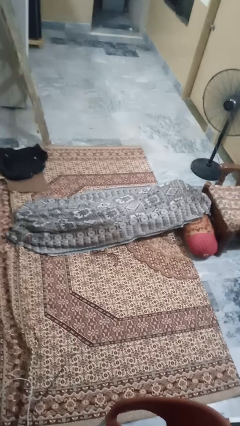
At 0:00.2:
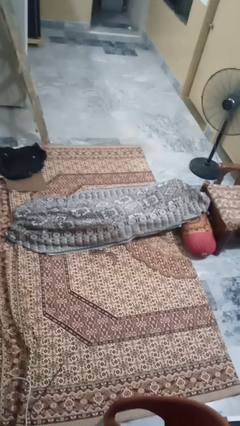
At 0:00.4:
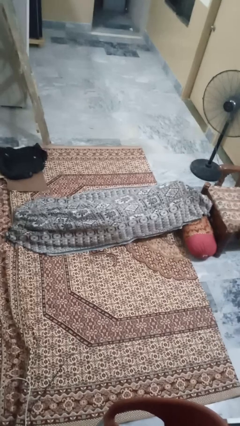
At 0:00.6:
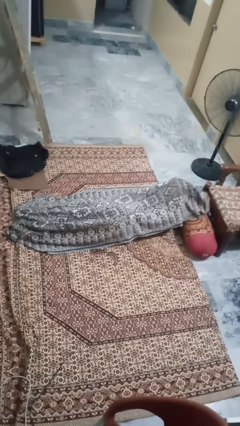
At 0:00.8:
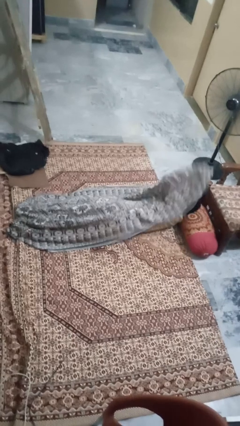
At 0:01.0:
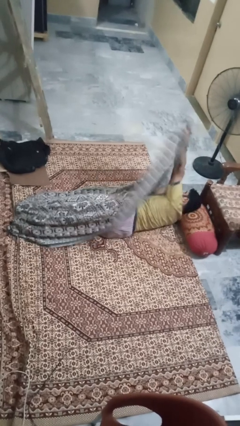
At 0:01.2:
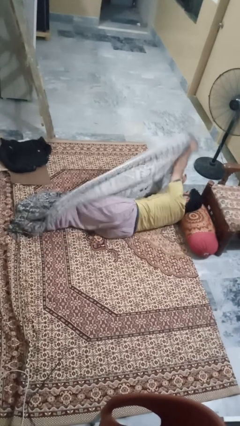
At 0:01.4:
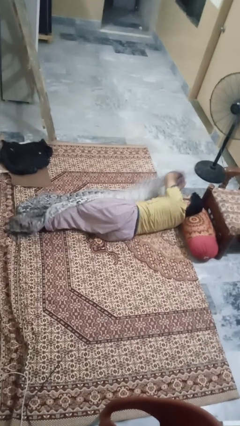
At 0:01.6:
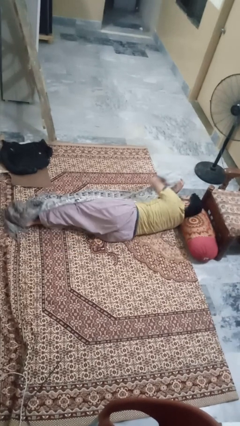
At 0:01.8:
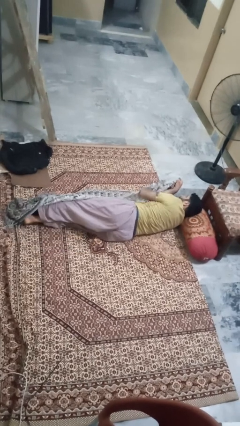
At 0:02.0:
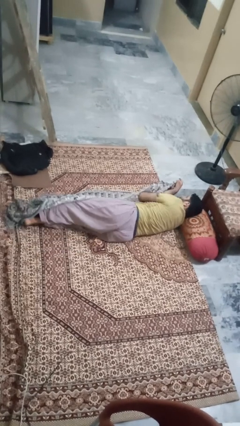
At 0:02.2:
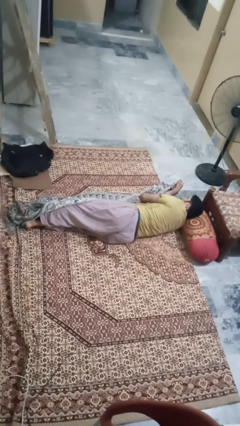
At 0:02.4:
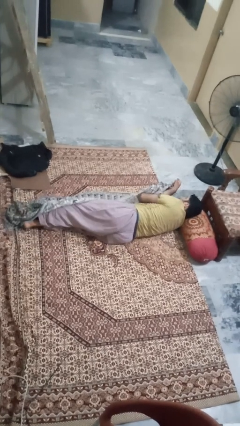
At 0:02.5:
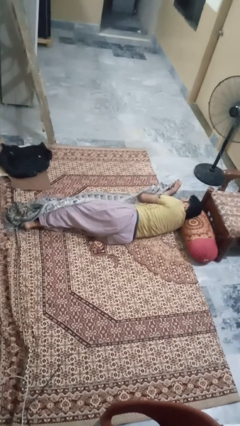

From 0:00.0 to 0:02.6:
person uncovers with blanket

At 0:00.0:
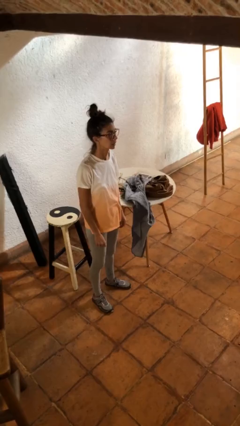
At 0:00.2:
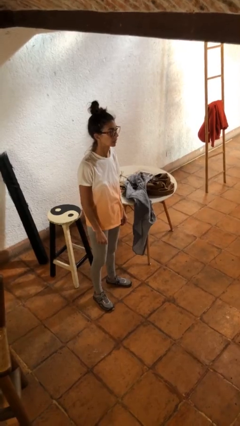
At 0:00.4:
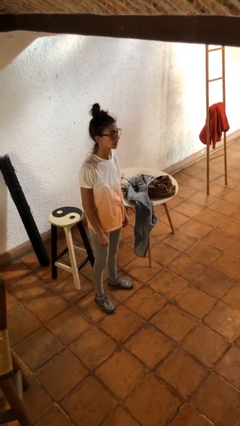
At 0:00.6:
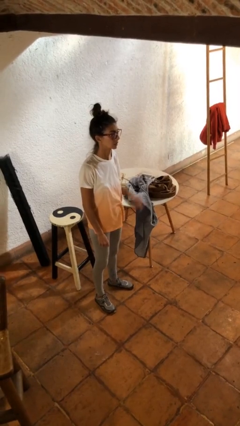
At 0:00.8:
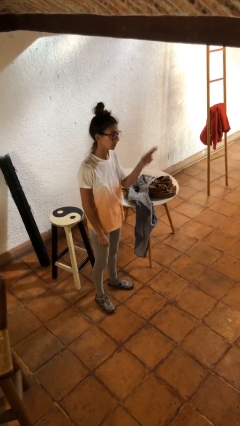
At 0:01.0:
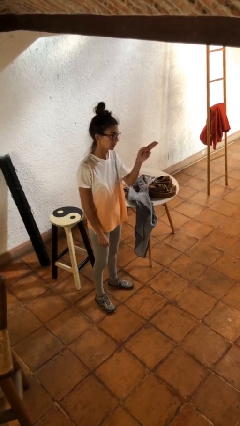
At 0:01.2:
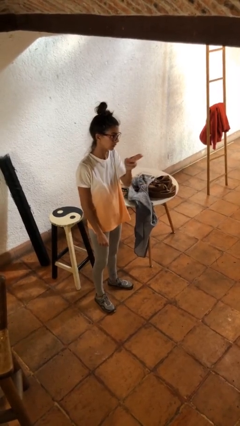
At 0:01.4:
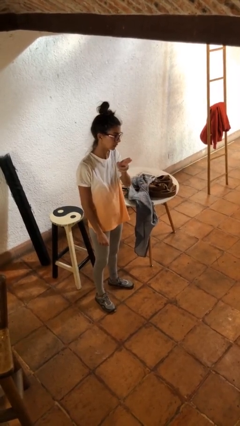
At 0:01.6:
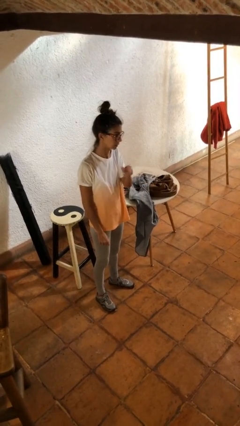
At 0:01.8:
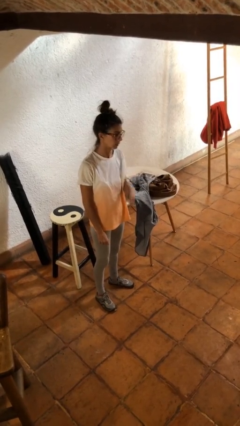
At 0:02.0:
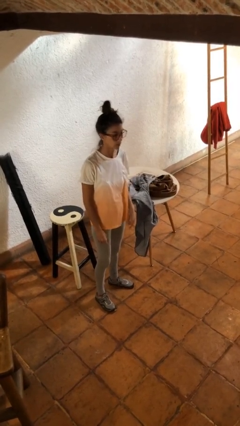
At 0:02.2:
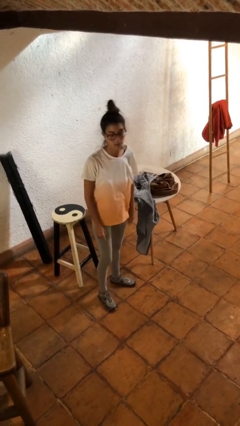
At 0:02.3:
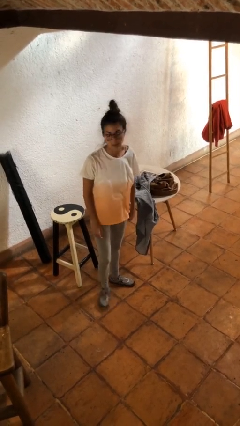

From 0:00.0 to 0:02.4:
person gestures swipe right

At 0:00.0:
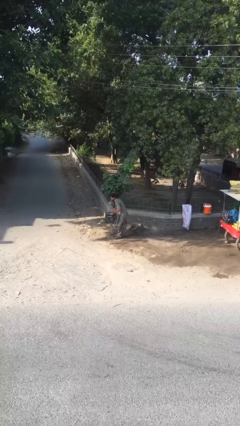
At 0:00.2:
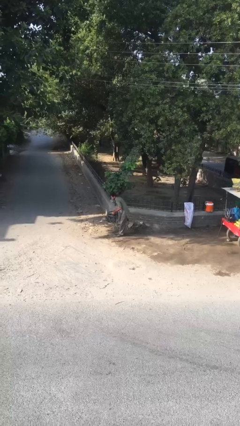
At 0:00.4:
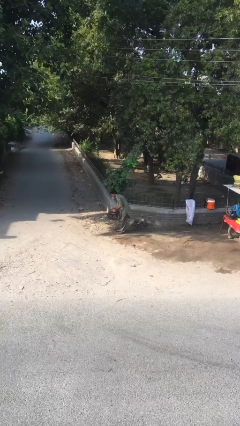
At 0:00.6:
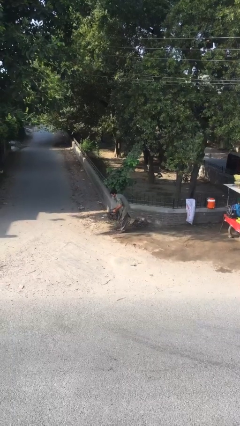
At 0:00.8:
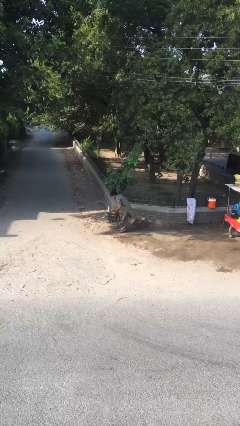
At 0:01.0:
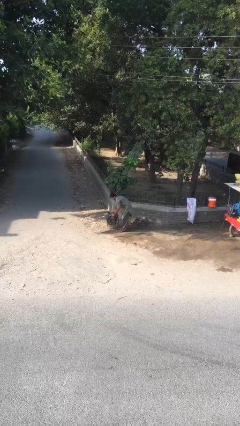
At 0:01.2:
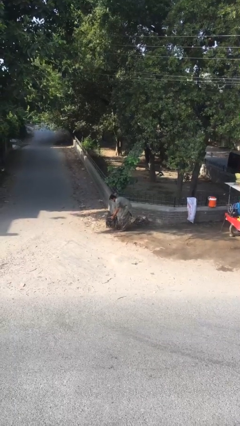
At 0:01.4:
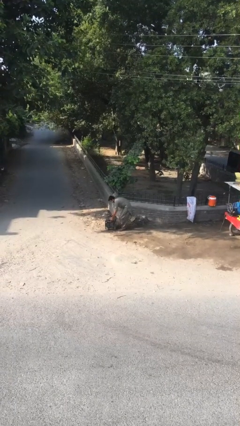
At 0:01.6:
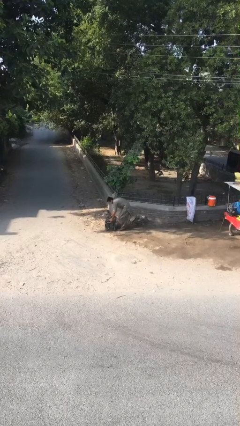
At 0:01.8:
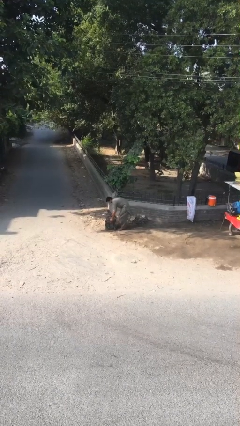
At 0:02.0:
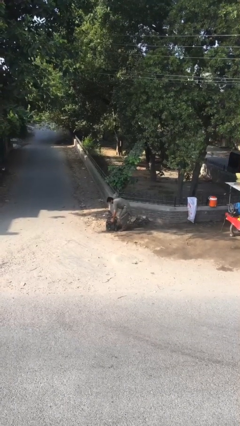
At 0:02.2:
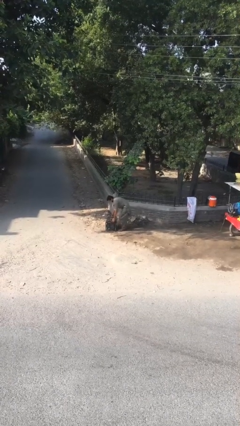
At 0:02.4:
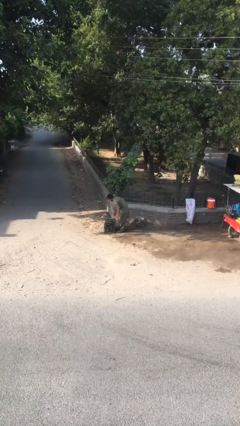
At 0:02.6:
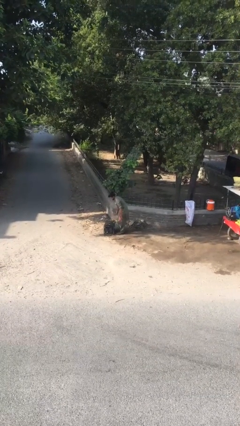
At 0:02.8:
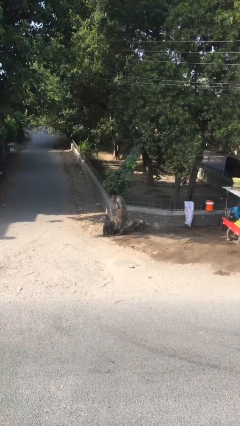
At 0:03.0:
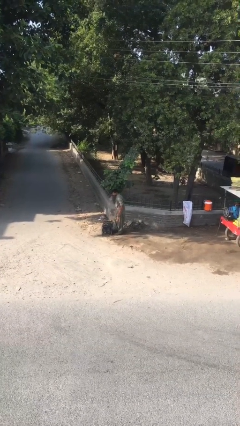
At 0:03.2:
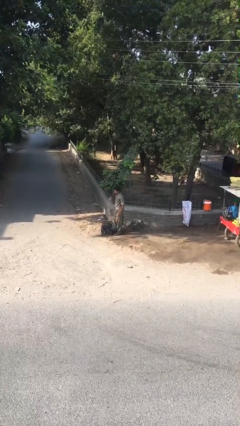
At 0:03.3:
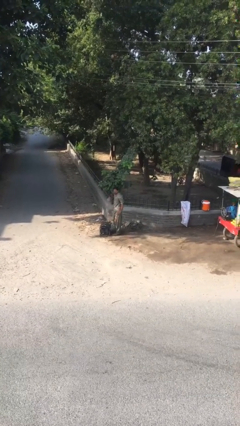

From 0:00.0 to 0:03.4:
person puts down object on floor

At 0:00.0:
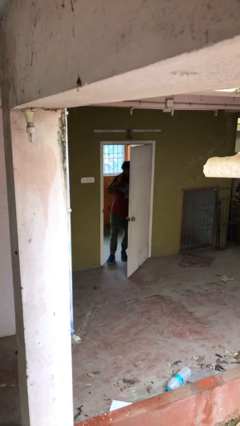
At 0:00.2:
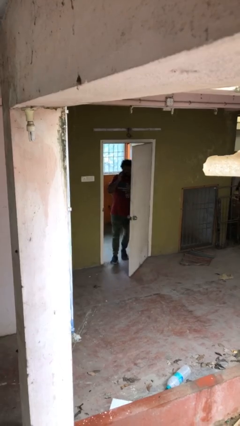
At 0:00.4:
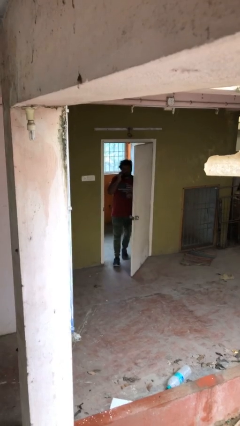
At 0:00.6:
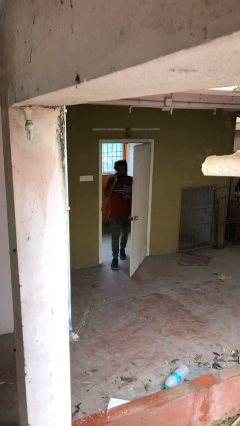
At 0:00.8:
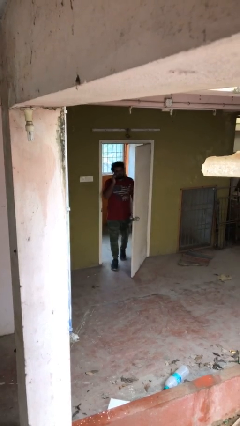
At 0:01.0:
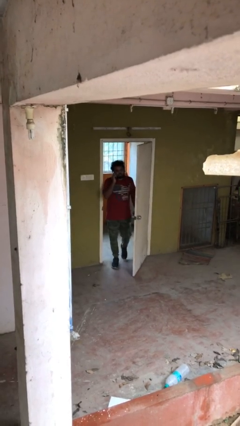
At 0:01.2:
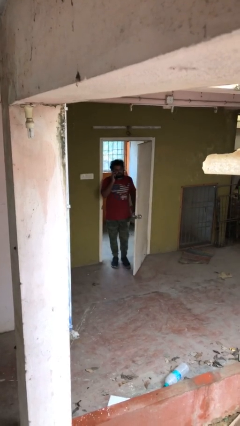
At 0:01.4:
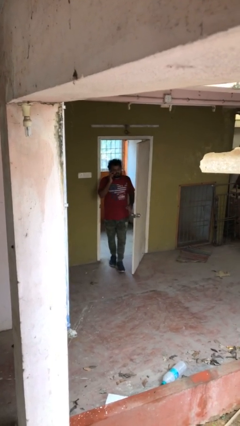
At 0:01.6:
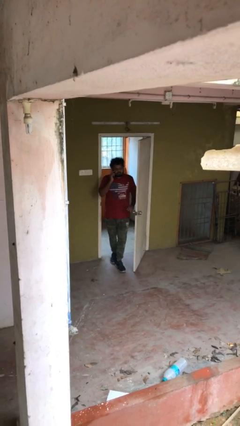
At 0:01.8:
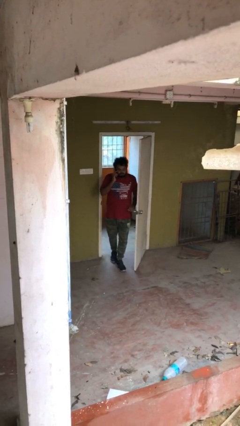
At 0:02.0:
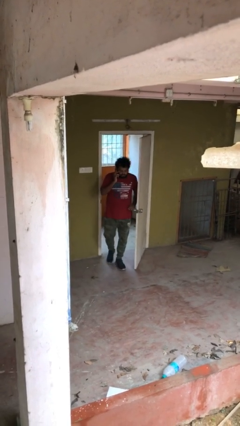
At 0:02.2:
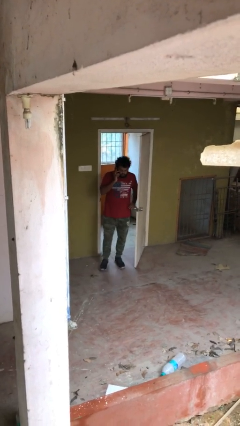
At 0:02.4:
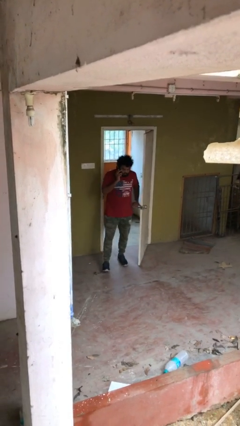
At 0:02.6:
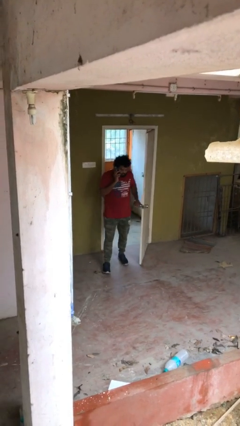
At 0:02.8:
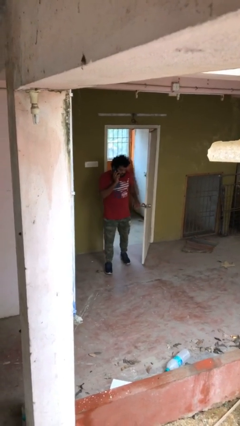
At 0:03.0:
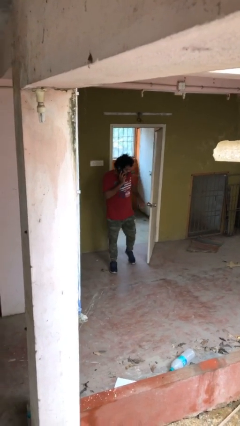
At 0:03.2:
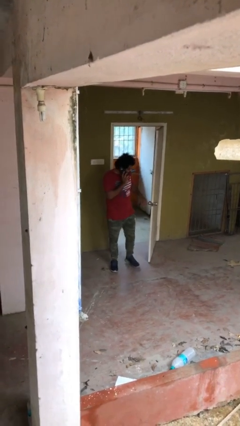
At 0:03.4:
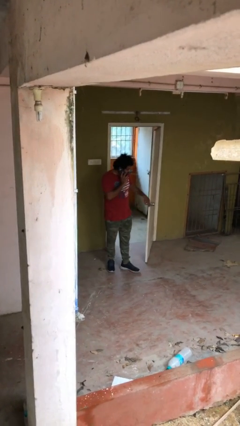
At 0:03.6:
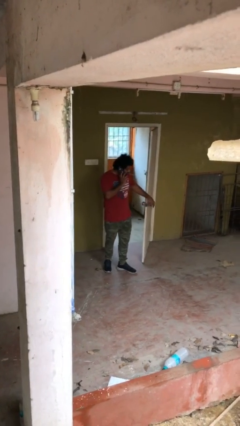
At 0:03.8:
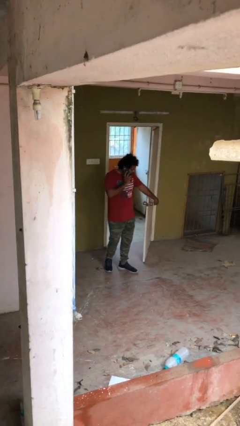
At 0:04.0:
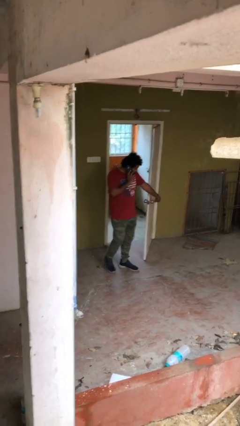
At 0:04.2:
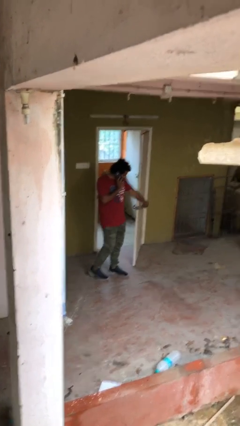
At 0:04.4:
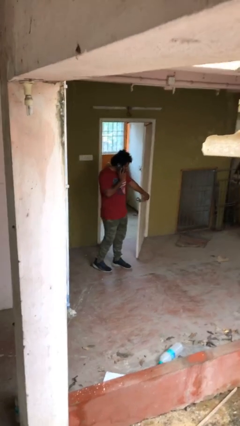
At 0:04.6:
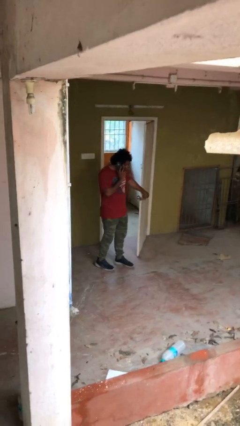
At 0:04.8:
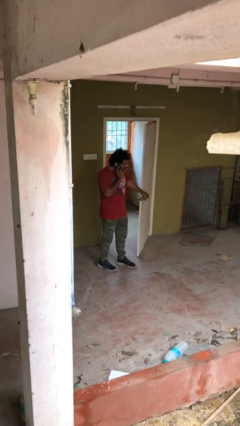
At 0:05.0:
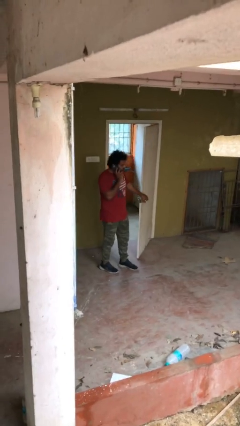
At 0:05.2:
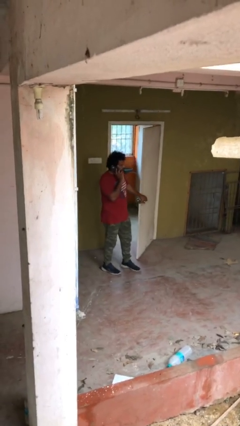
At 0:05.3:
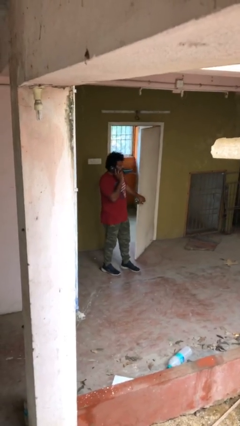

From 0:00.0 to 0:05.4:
person enters scene through structure

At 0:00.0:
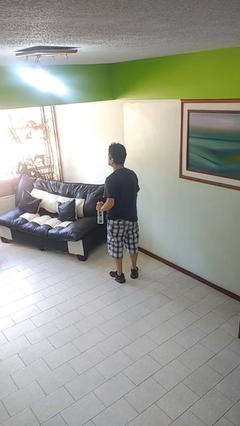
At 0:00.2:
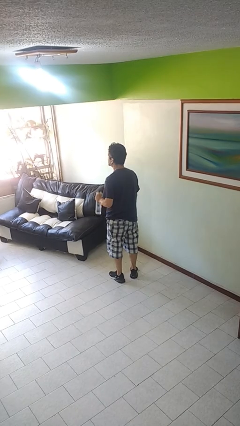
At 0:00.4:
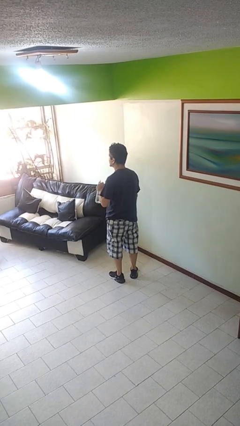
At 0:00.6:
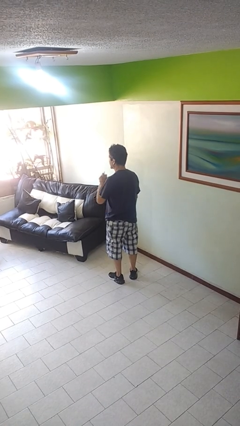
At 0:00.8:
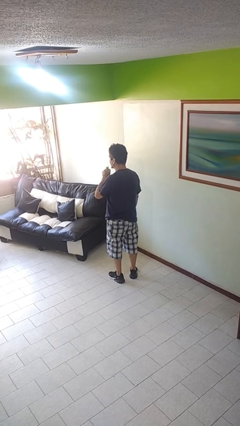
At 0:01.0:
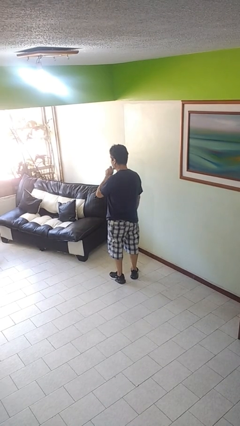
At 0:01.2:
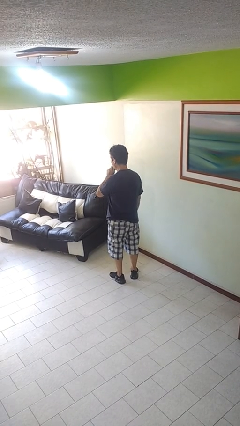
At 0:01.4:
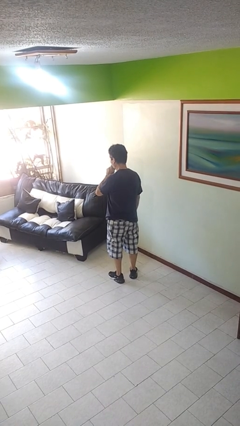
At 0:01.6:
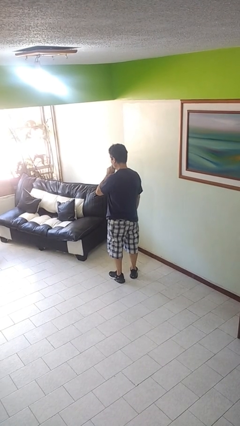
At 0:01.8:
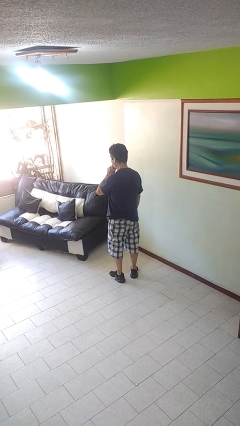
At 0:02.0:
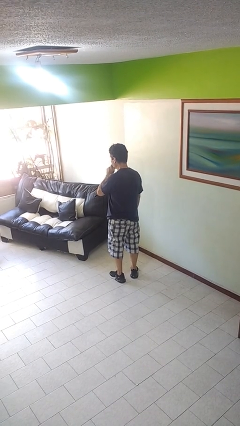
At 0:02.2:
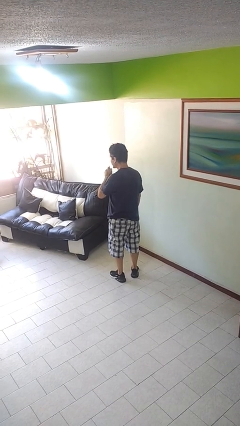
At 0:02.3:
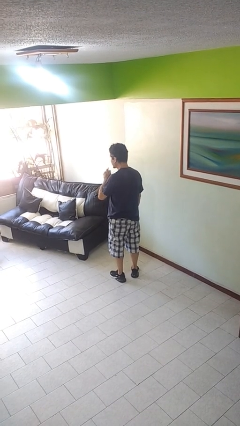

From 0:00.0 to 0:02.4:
person drinks from straw

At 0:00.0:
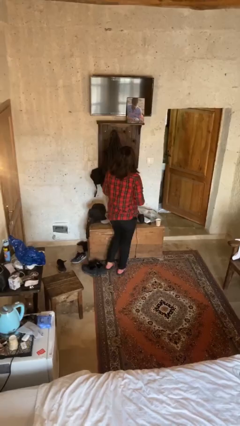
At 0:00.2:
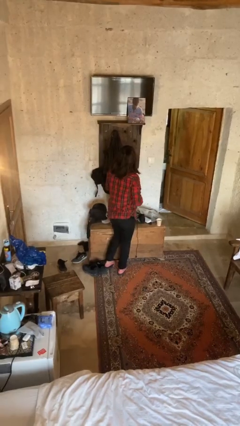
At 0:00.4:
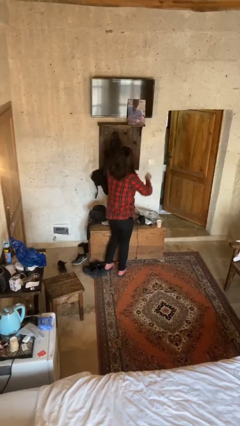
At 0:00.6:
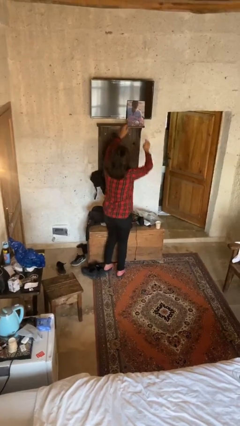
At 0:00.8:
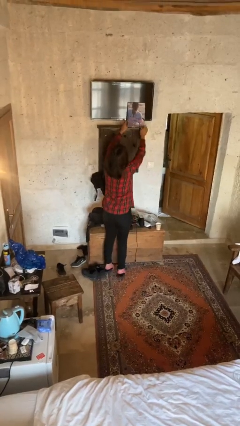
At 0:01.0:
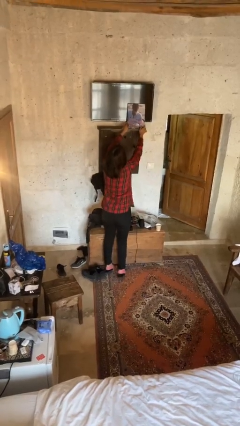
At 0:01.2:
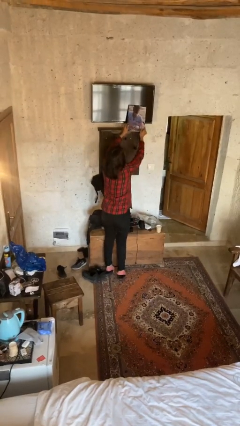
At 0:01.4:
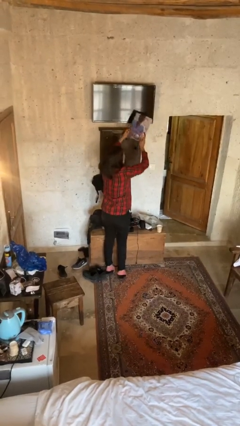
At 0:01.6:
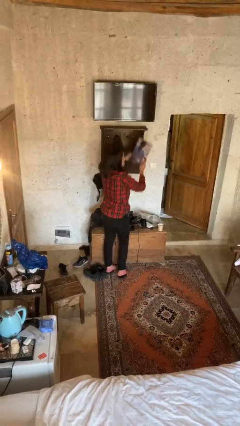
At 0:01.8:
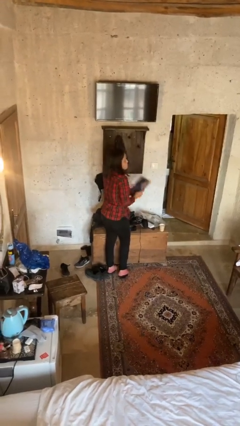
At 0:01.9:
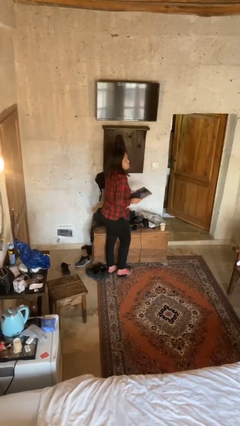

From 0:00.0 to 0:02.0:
person picks up object from shelf
